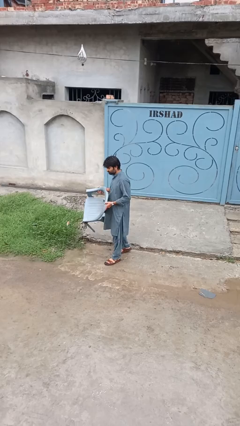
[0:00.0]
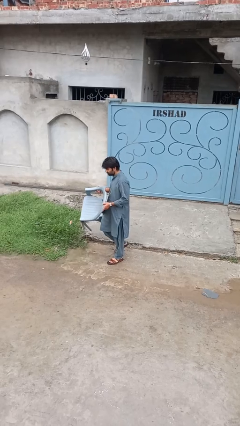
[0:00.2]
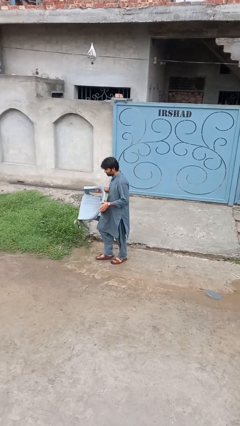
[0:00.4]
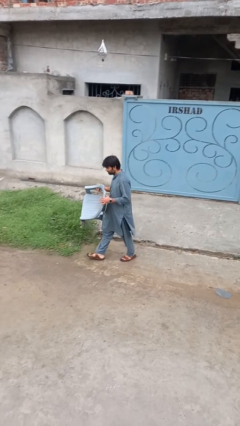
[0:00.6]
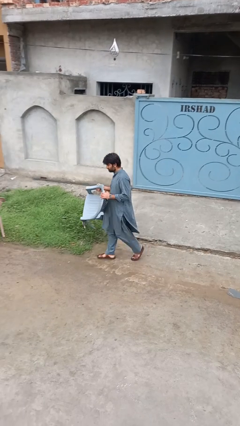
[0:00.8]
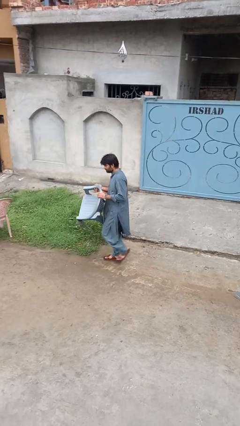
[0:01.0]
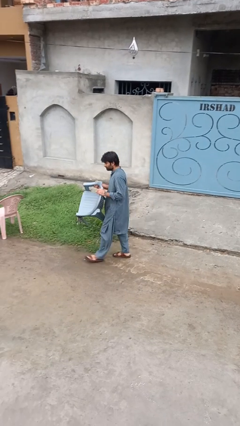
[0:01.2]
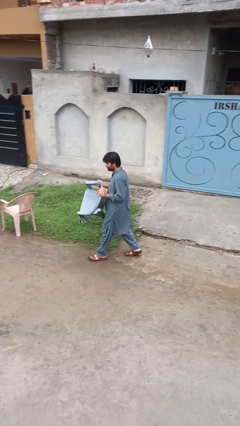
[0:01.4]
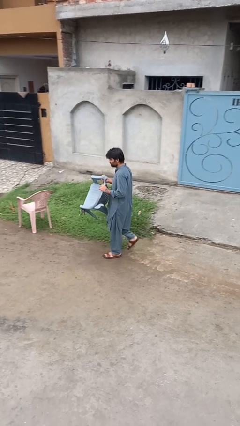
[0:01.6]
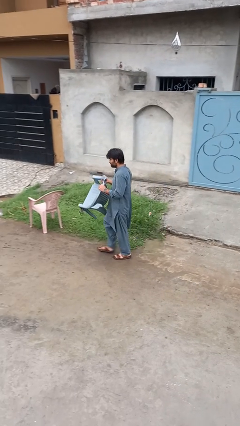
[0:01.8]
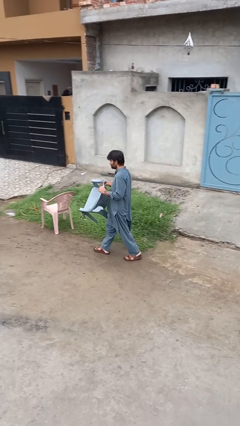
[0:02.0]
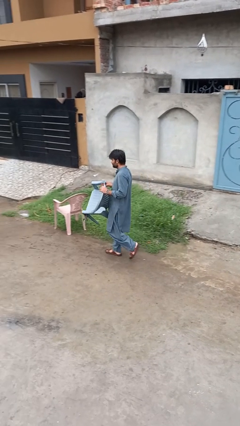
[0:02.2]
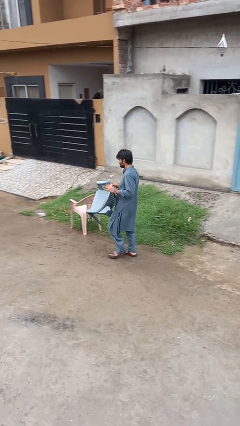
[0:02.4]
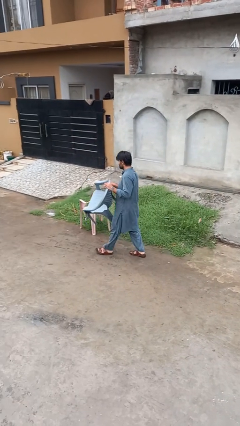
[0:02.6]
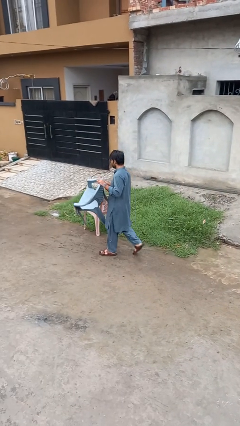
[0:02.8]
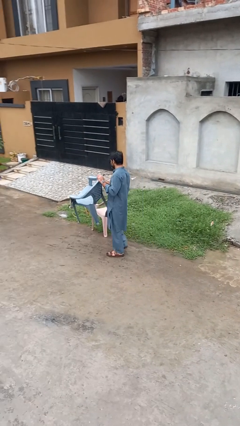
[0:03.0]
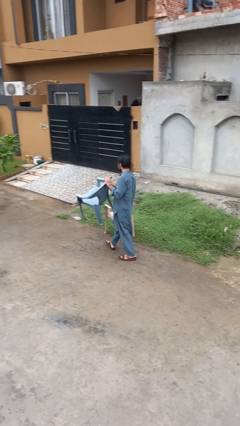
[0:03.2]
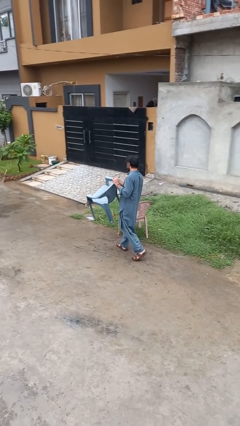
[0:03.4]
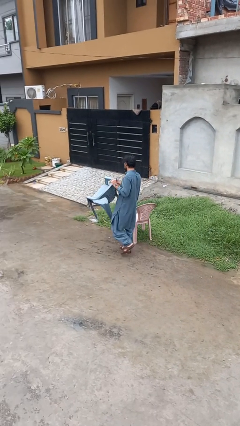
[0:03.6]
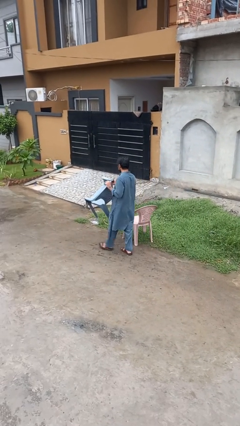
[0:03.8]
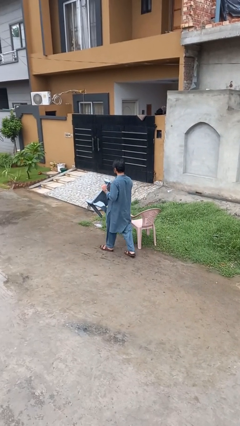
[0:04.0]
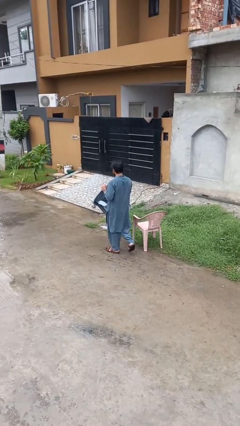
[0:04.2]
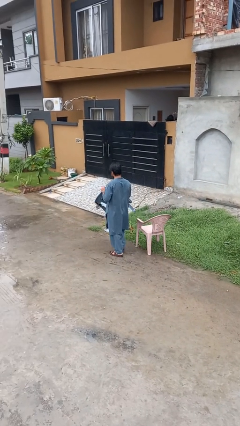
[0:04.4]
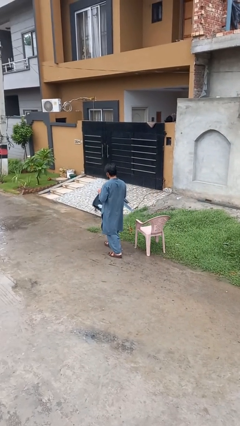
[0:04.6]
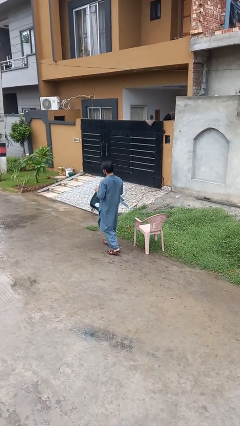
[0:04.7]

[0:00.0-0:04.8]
person carries furniture

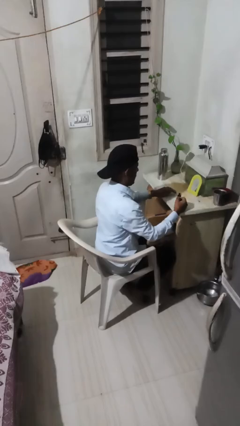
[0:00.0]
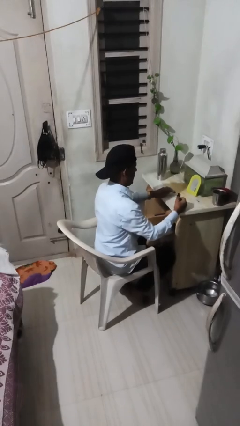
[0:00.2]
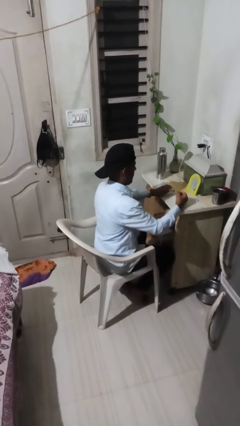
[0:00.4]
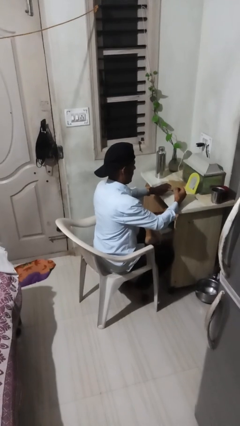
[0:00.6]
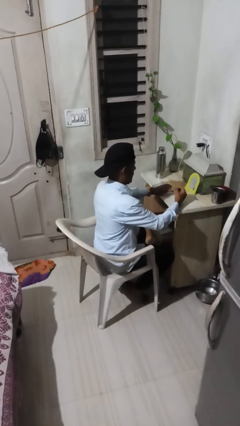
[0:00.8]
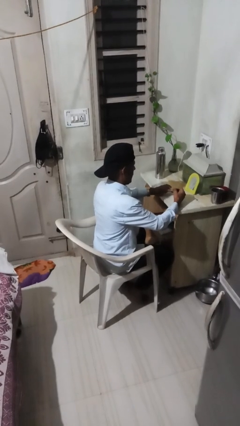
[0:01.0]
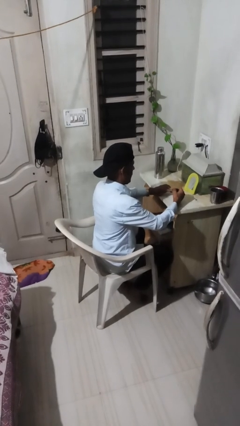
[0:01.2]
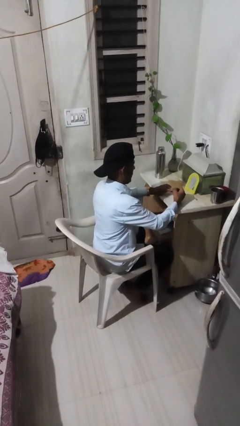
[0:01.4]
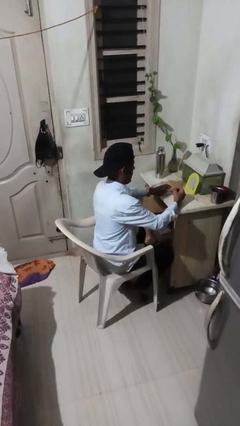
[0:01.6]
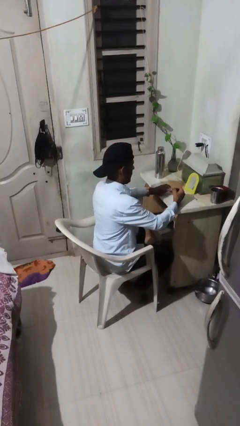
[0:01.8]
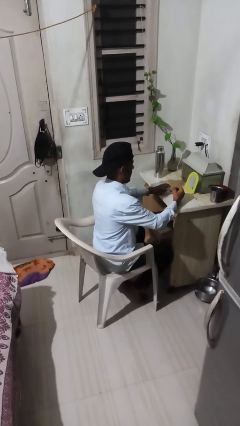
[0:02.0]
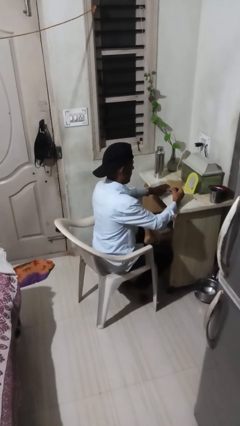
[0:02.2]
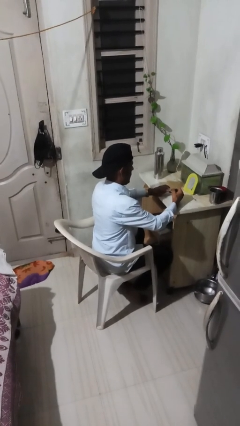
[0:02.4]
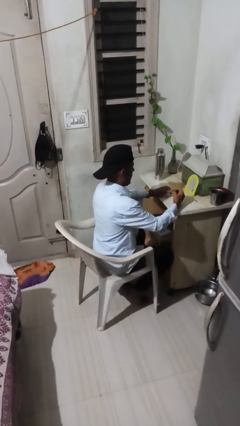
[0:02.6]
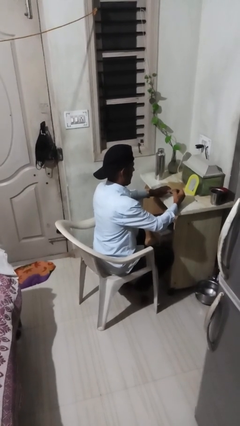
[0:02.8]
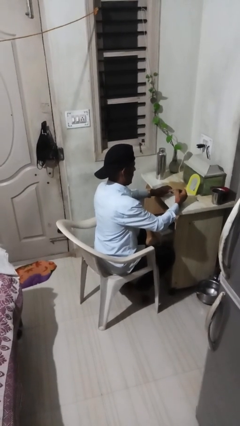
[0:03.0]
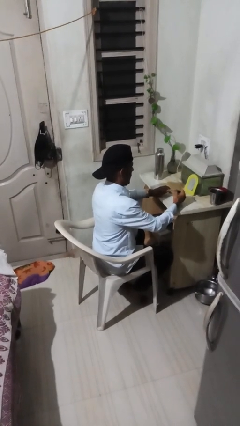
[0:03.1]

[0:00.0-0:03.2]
person paints fingernails

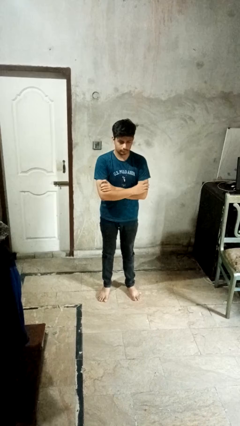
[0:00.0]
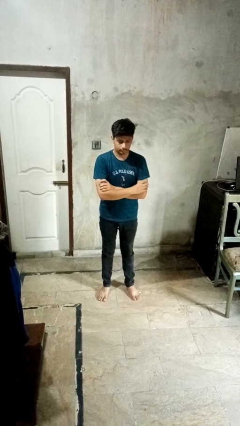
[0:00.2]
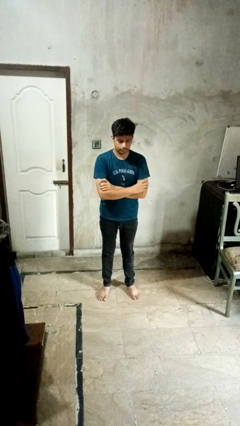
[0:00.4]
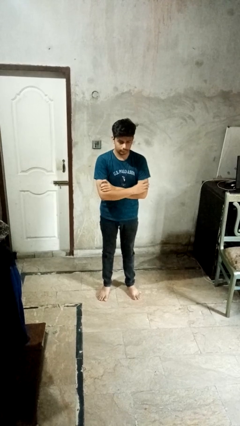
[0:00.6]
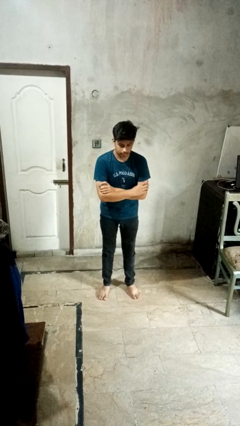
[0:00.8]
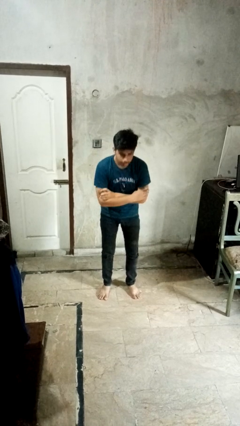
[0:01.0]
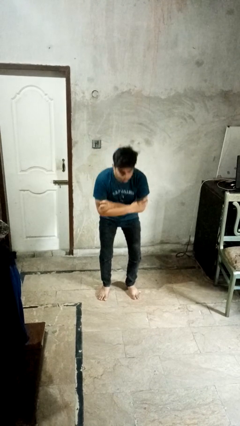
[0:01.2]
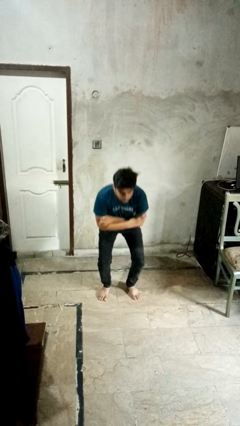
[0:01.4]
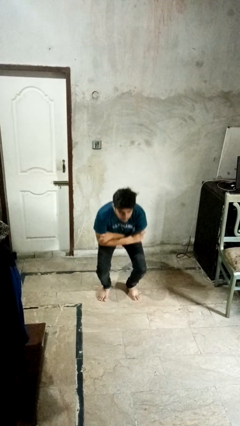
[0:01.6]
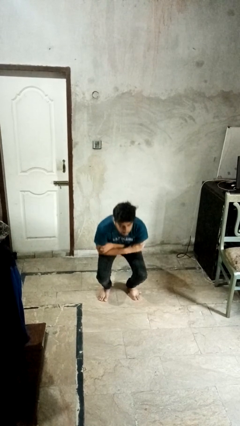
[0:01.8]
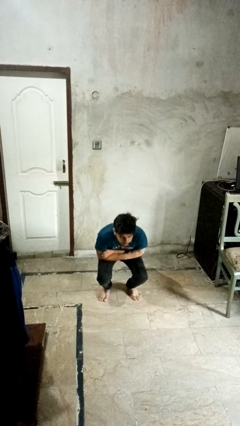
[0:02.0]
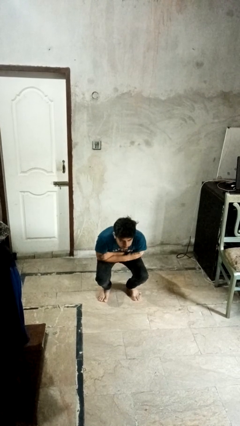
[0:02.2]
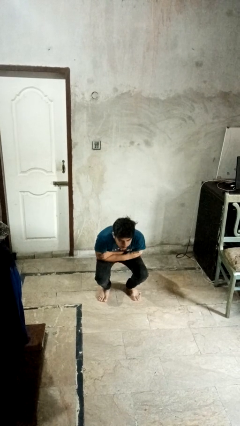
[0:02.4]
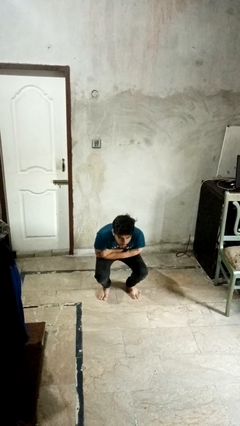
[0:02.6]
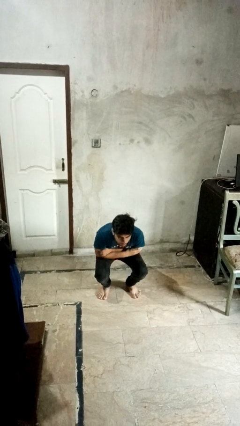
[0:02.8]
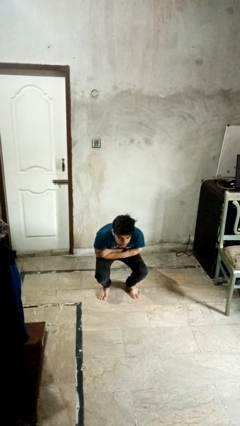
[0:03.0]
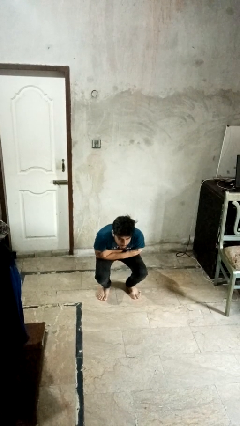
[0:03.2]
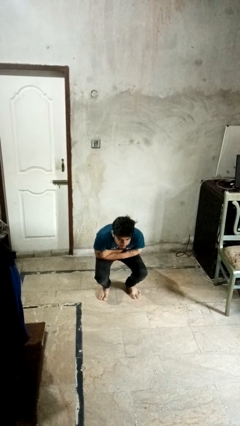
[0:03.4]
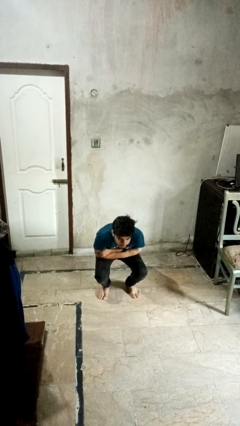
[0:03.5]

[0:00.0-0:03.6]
person squats

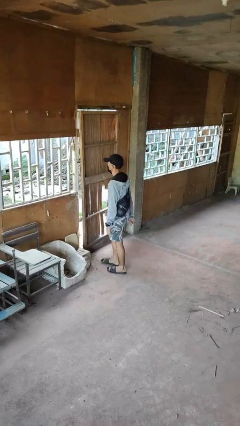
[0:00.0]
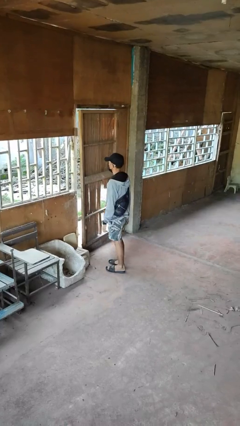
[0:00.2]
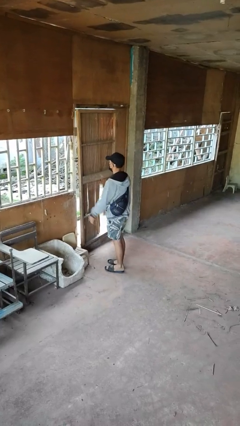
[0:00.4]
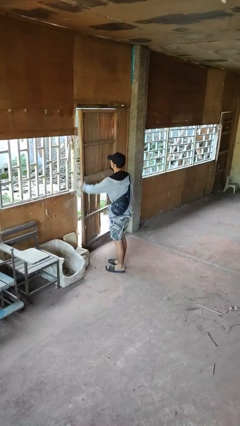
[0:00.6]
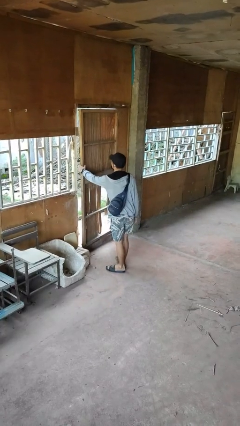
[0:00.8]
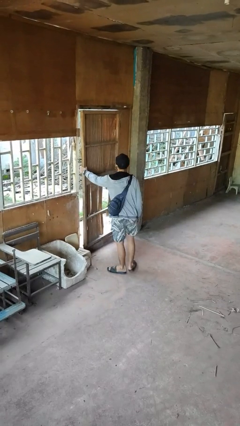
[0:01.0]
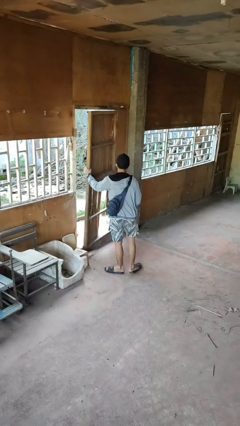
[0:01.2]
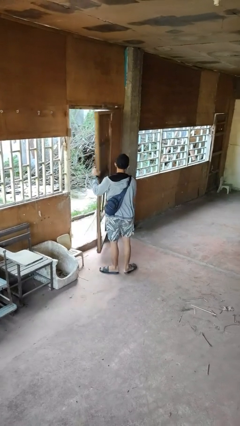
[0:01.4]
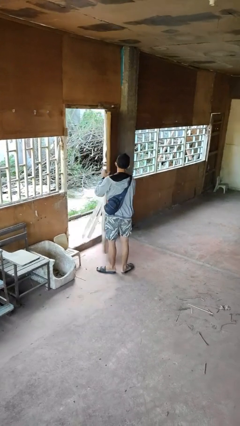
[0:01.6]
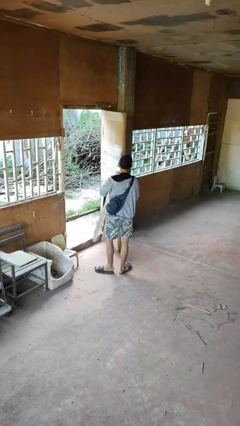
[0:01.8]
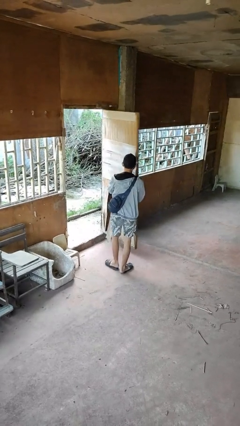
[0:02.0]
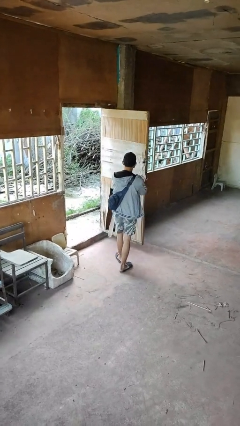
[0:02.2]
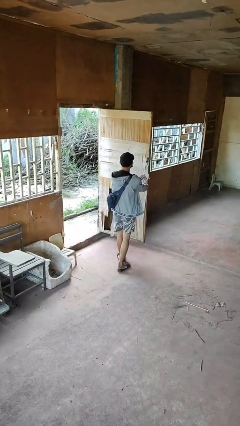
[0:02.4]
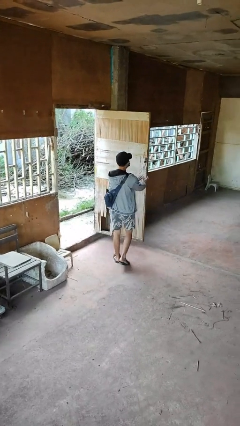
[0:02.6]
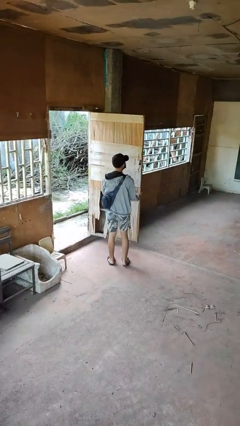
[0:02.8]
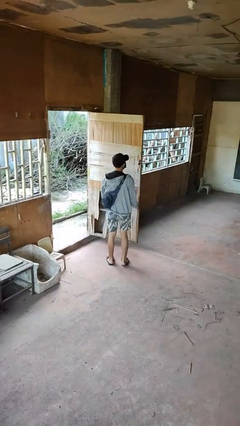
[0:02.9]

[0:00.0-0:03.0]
person opens facility door

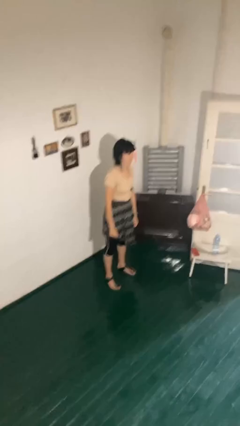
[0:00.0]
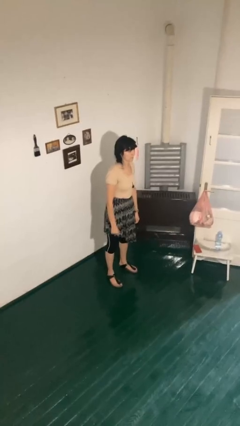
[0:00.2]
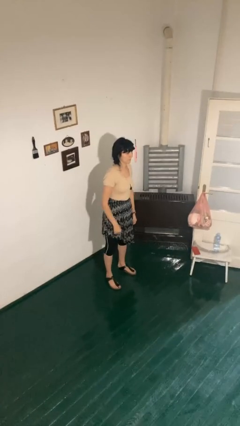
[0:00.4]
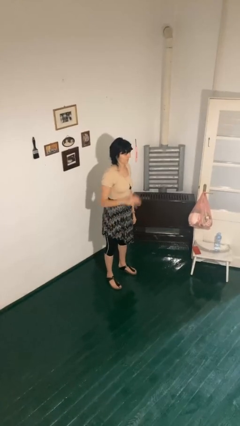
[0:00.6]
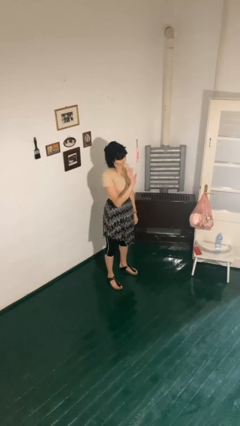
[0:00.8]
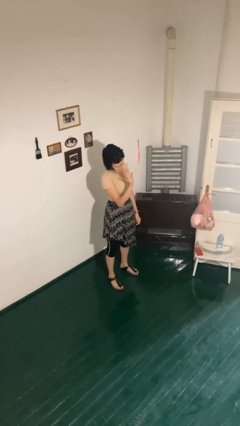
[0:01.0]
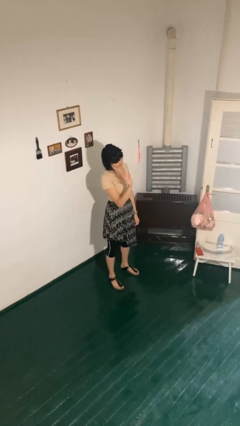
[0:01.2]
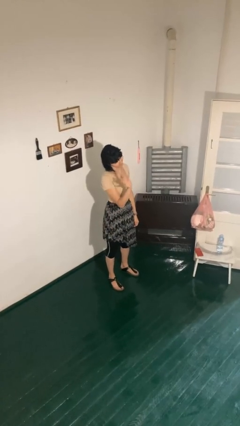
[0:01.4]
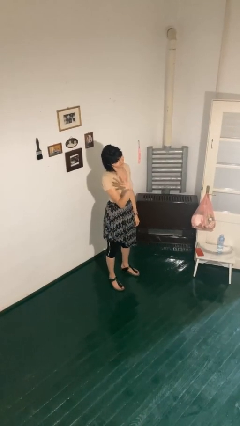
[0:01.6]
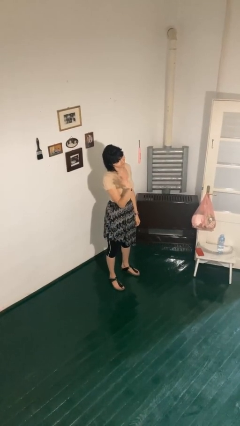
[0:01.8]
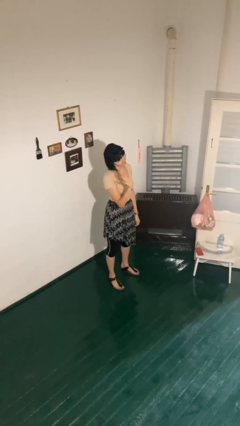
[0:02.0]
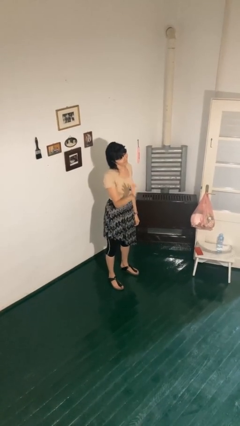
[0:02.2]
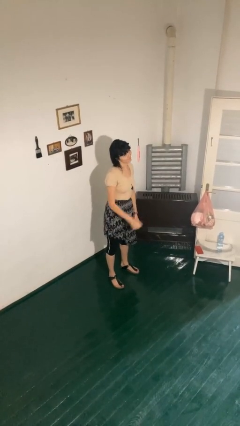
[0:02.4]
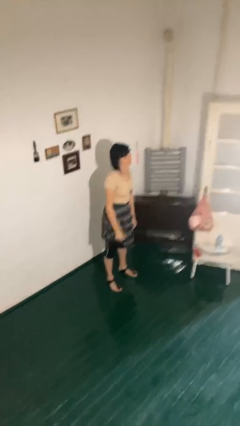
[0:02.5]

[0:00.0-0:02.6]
person waves at person

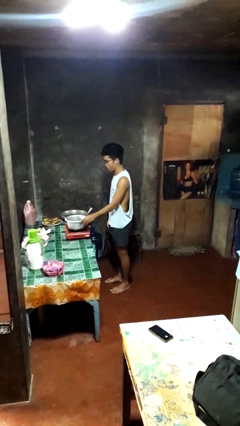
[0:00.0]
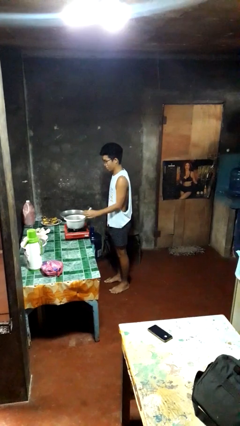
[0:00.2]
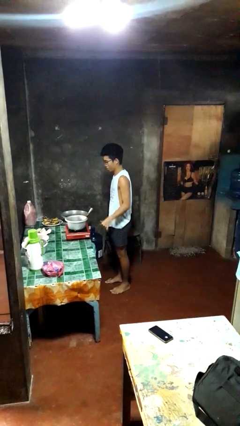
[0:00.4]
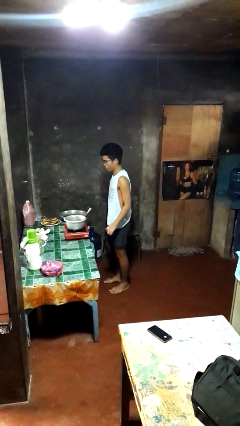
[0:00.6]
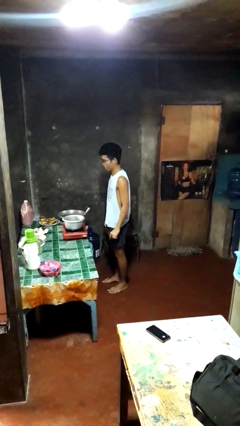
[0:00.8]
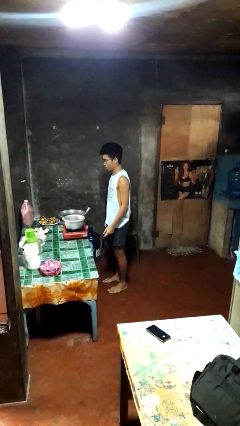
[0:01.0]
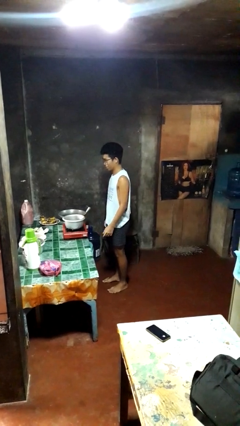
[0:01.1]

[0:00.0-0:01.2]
person burns hand
